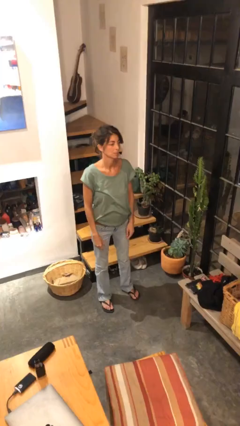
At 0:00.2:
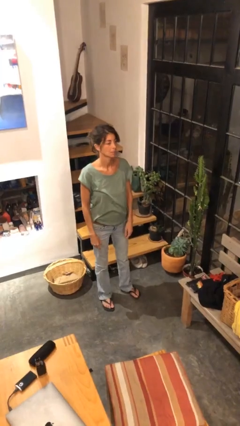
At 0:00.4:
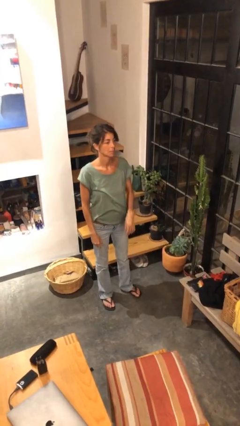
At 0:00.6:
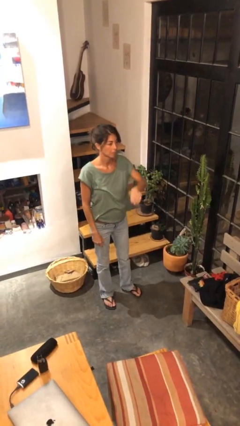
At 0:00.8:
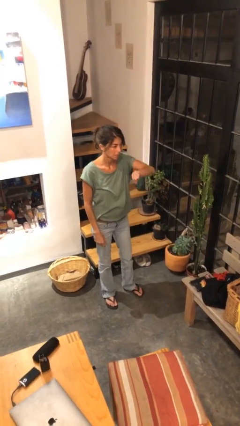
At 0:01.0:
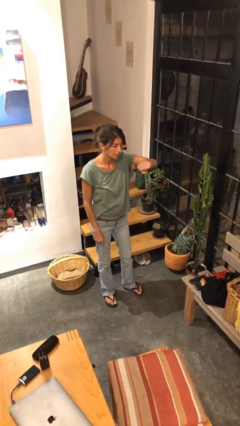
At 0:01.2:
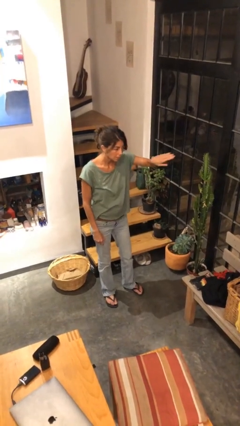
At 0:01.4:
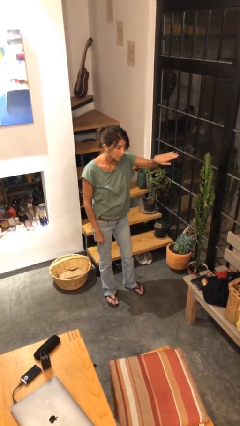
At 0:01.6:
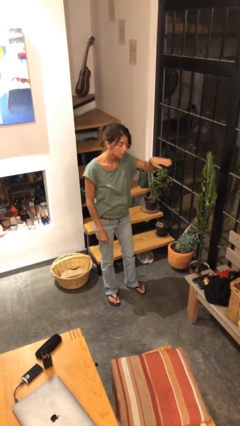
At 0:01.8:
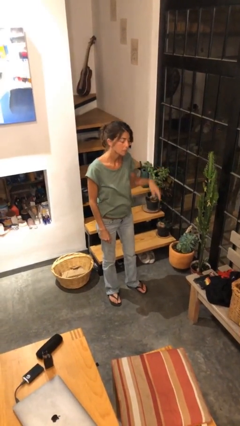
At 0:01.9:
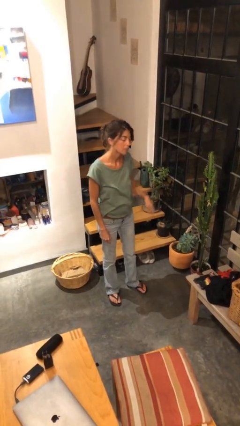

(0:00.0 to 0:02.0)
person gestures swipe left

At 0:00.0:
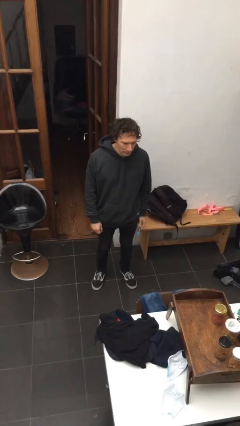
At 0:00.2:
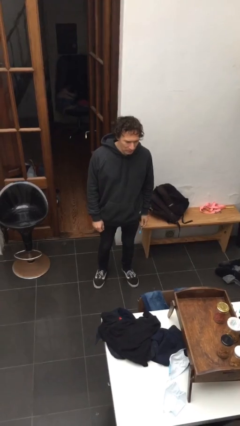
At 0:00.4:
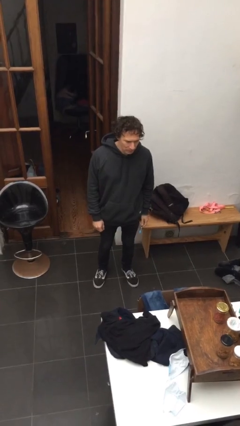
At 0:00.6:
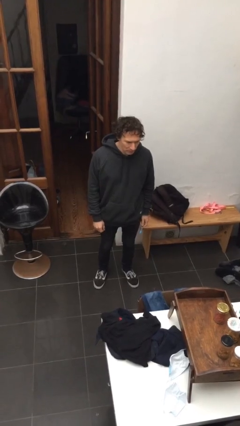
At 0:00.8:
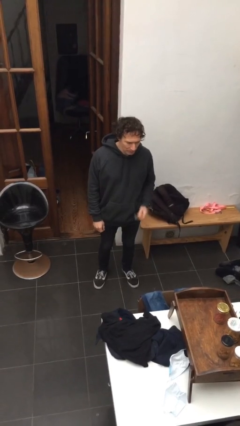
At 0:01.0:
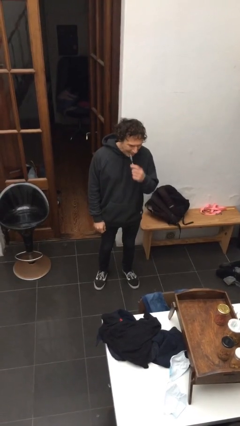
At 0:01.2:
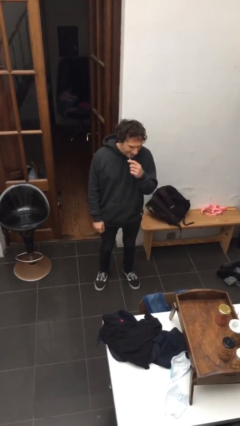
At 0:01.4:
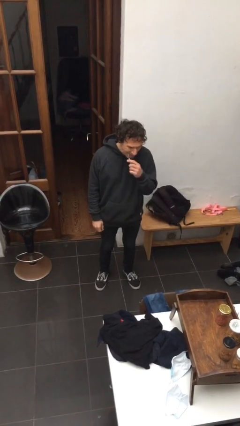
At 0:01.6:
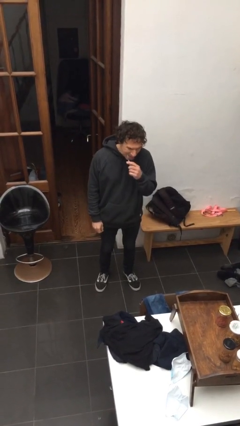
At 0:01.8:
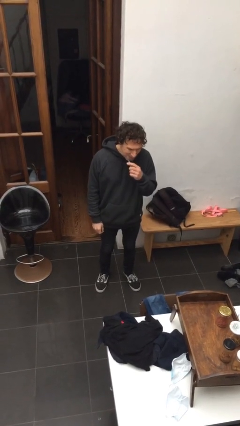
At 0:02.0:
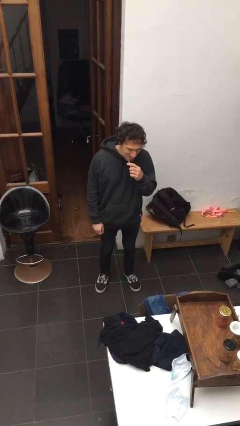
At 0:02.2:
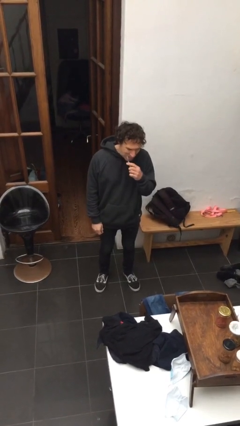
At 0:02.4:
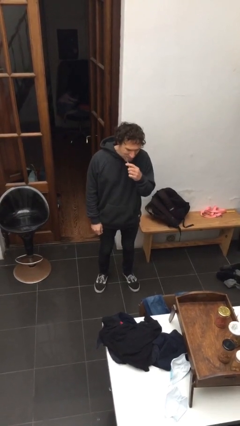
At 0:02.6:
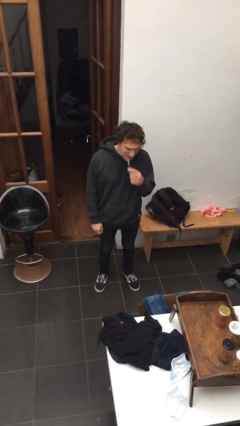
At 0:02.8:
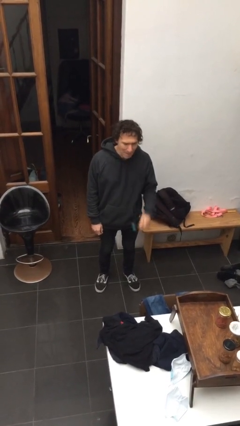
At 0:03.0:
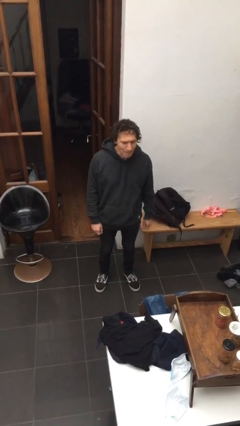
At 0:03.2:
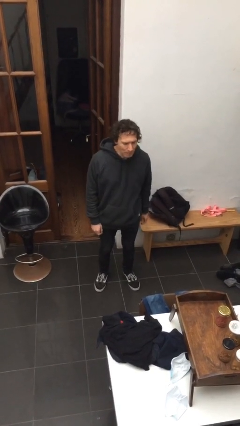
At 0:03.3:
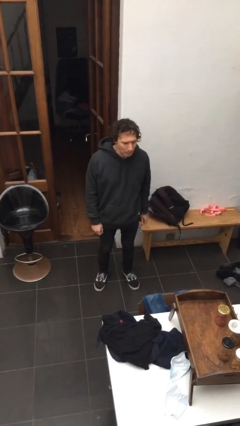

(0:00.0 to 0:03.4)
person flosses

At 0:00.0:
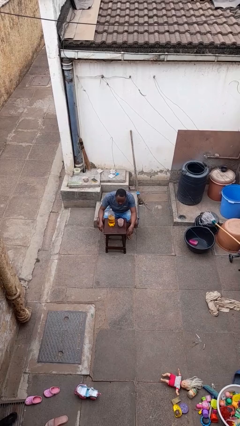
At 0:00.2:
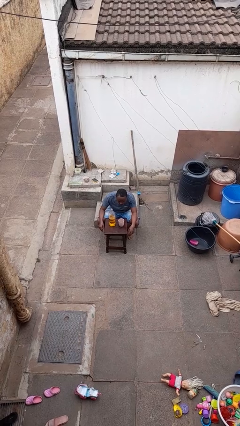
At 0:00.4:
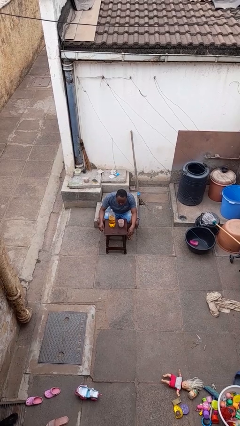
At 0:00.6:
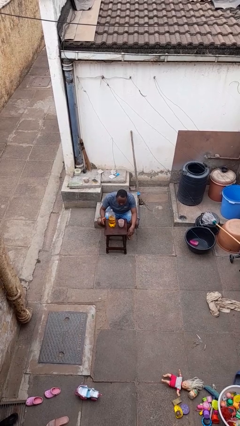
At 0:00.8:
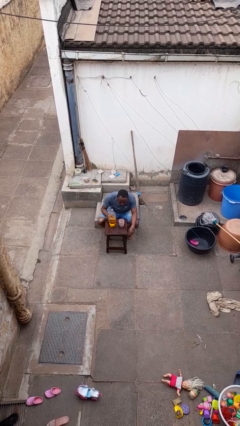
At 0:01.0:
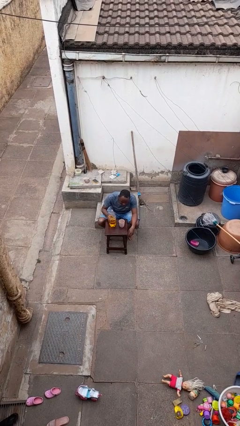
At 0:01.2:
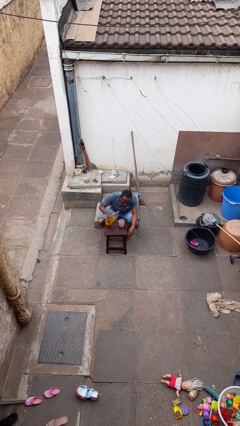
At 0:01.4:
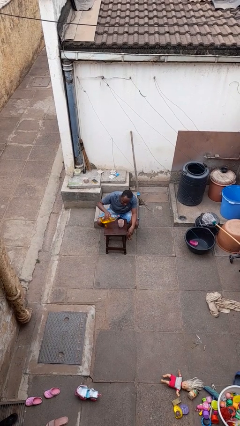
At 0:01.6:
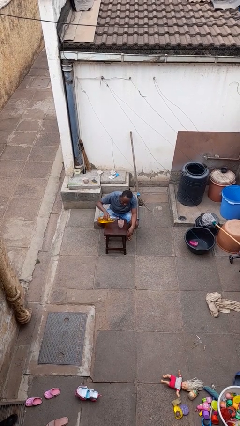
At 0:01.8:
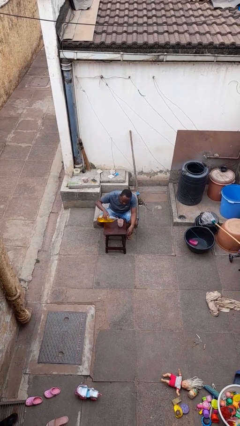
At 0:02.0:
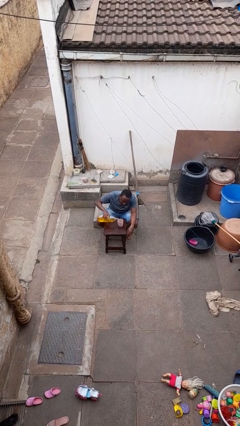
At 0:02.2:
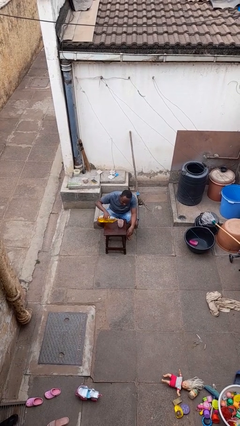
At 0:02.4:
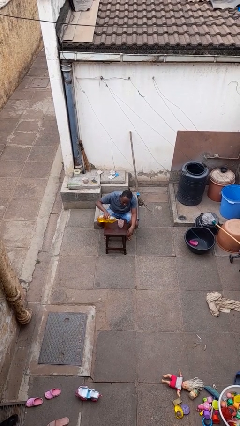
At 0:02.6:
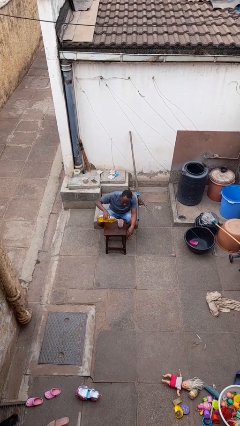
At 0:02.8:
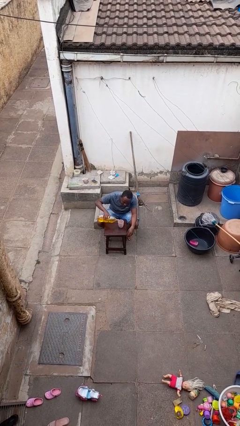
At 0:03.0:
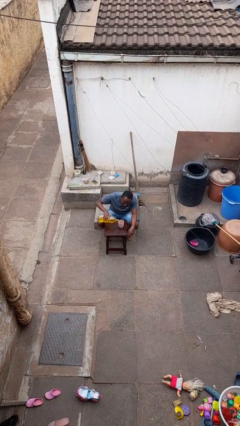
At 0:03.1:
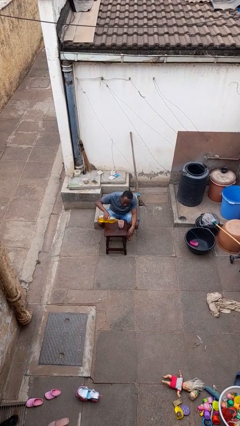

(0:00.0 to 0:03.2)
person pours liquid into cup

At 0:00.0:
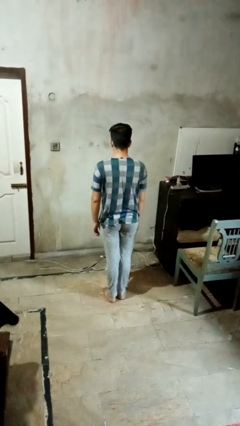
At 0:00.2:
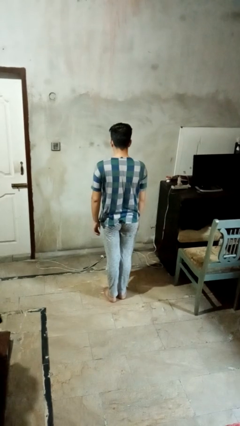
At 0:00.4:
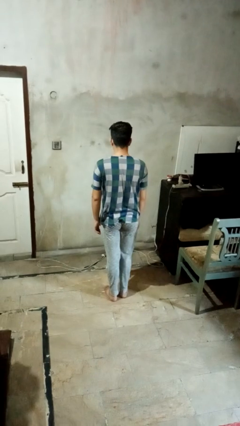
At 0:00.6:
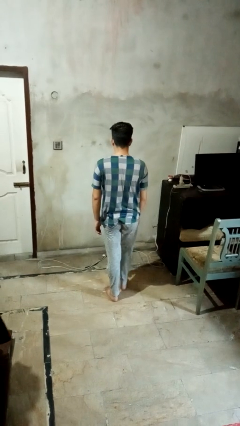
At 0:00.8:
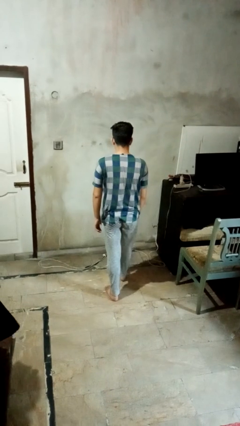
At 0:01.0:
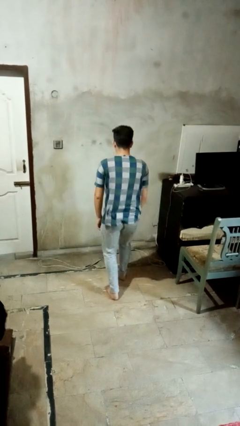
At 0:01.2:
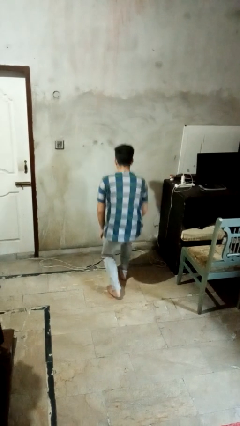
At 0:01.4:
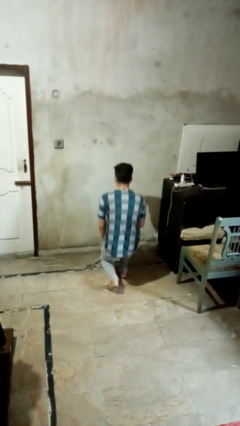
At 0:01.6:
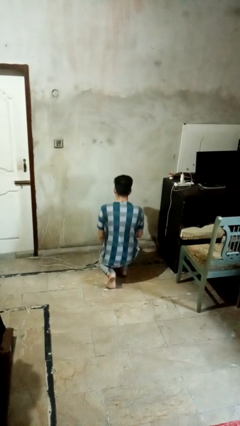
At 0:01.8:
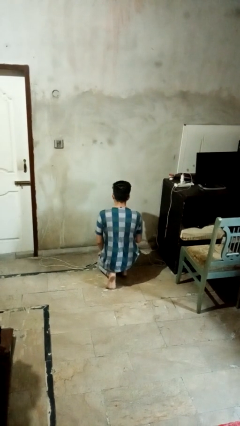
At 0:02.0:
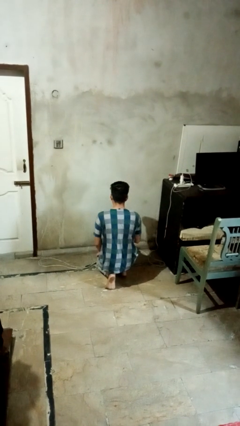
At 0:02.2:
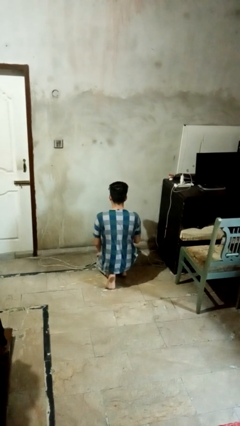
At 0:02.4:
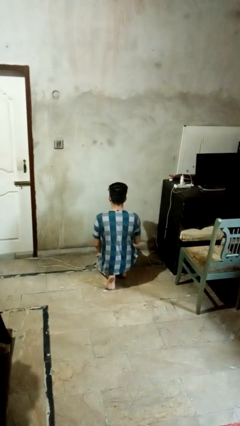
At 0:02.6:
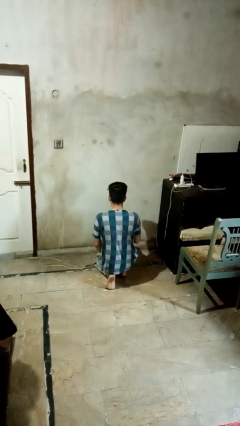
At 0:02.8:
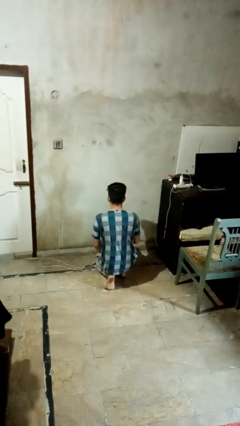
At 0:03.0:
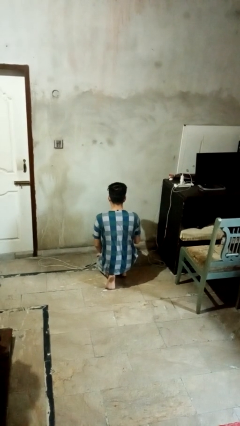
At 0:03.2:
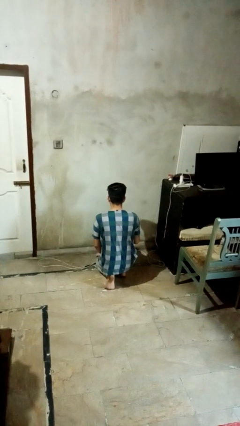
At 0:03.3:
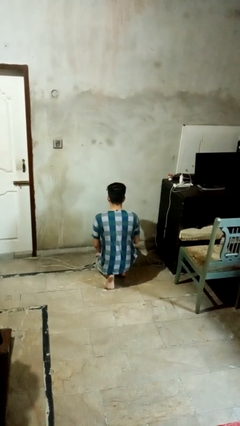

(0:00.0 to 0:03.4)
person kneels

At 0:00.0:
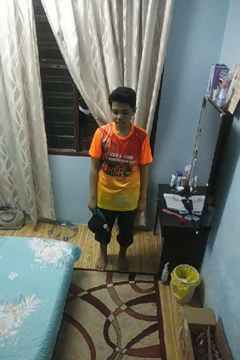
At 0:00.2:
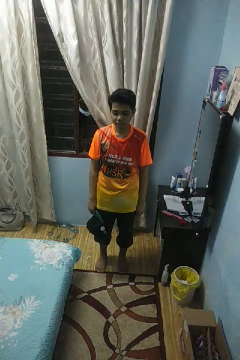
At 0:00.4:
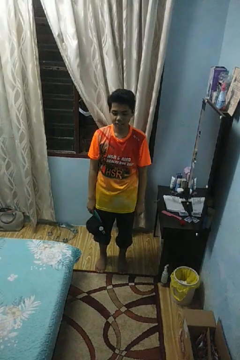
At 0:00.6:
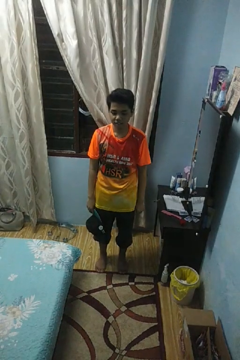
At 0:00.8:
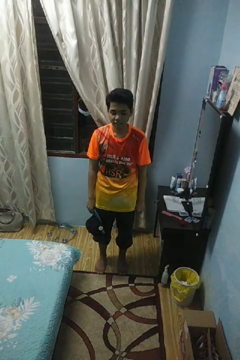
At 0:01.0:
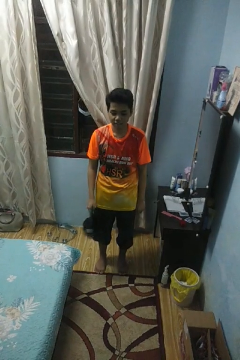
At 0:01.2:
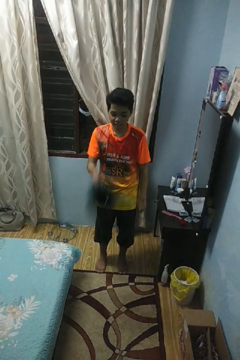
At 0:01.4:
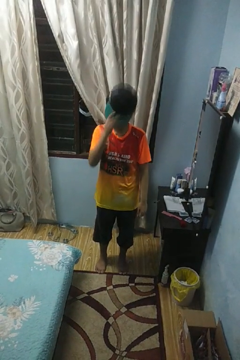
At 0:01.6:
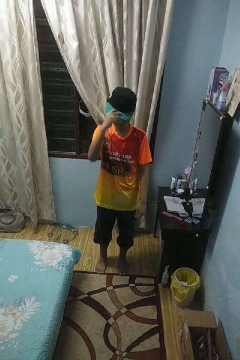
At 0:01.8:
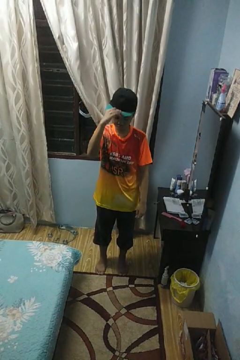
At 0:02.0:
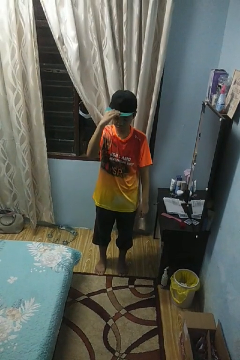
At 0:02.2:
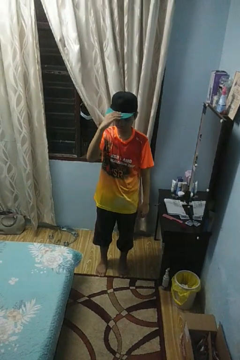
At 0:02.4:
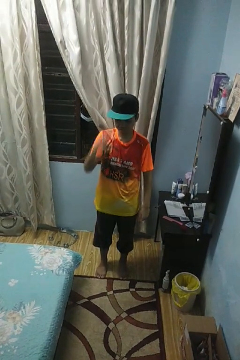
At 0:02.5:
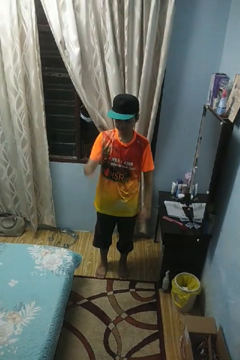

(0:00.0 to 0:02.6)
person puts on hat

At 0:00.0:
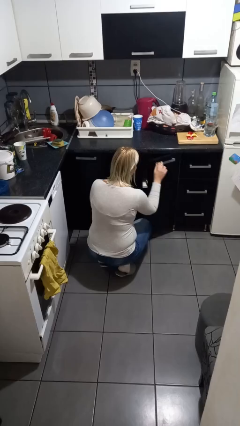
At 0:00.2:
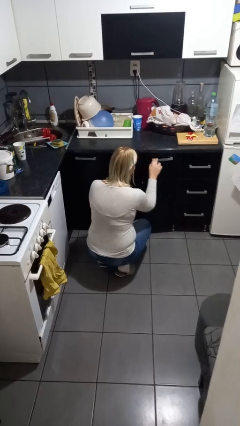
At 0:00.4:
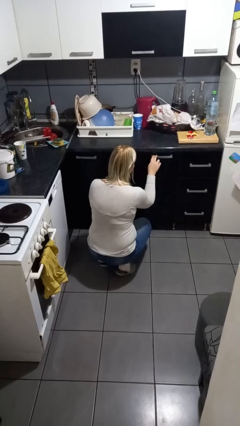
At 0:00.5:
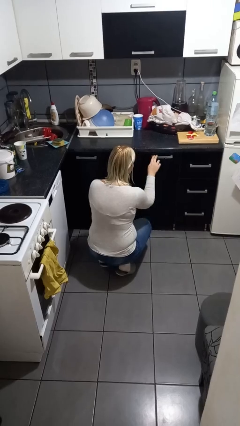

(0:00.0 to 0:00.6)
person closes cabinet

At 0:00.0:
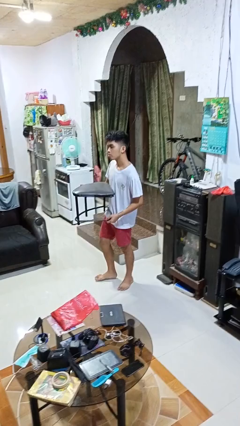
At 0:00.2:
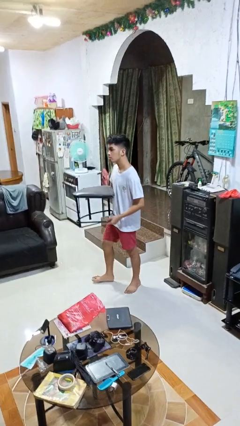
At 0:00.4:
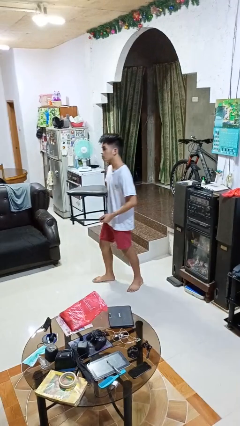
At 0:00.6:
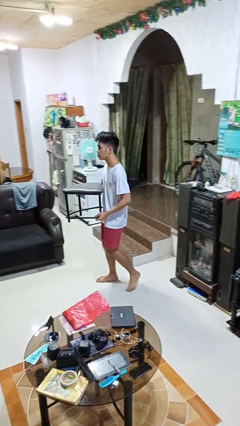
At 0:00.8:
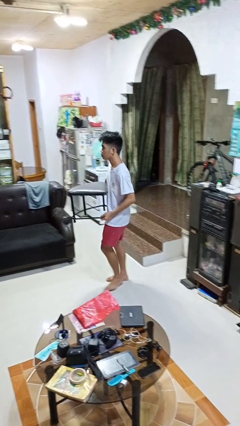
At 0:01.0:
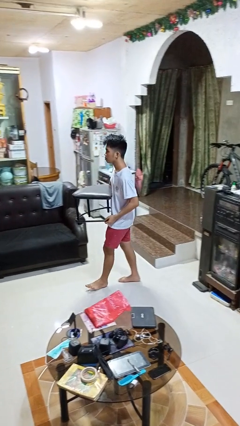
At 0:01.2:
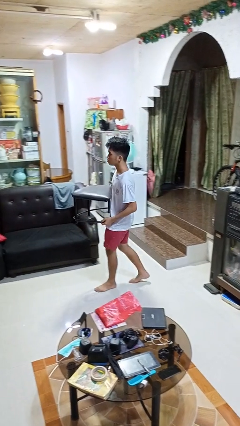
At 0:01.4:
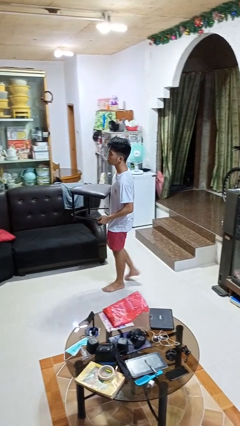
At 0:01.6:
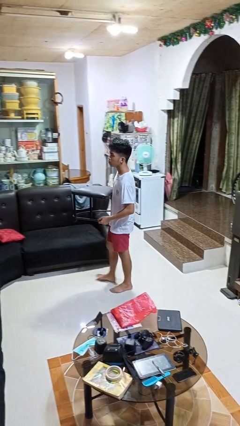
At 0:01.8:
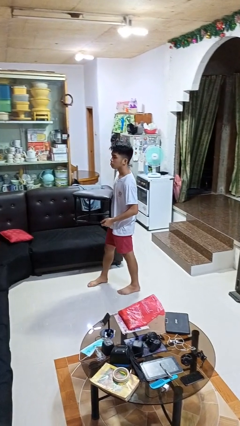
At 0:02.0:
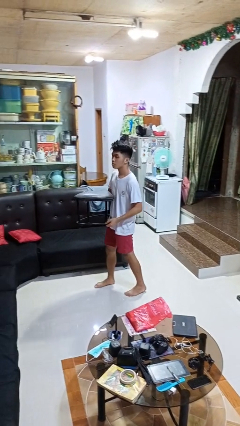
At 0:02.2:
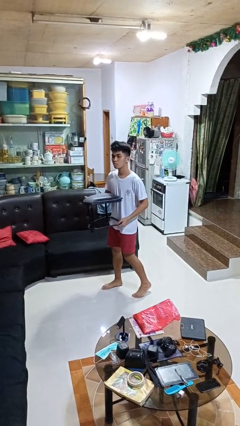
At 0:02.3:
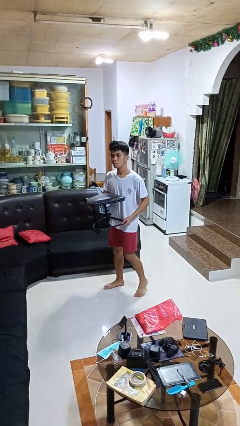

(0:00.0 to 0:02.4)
person carries furniture
